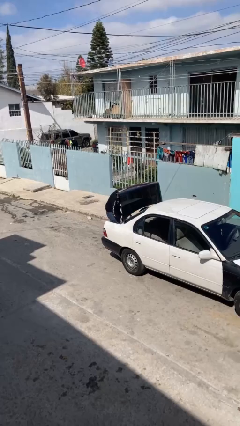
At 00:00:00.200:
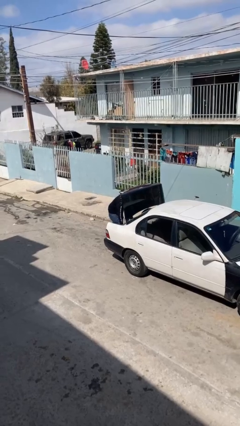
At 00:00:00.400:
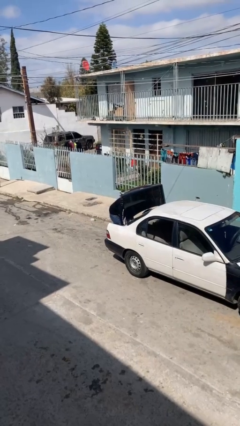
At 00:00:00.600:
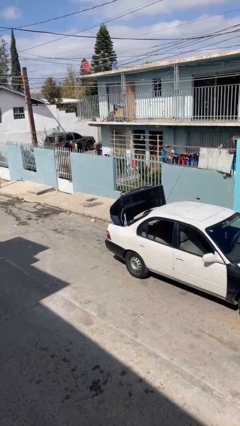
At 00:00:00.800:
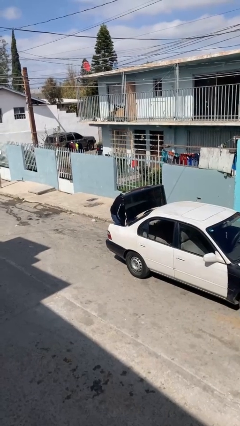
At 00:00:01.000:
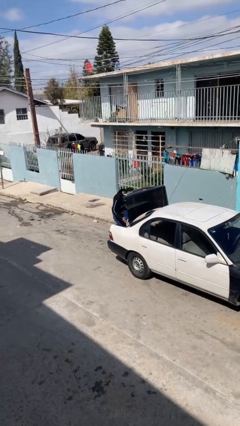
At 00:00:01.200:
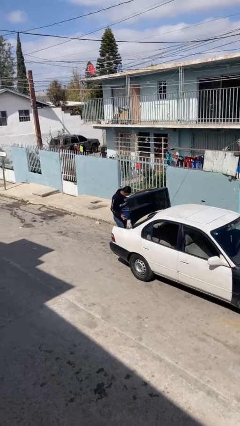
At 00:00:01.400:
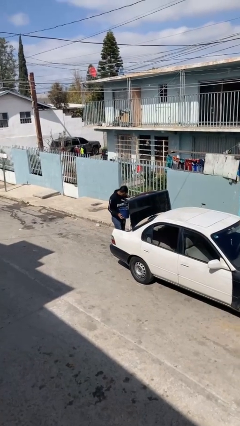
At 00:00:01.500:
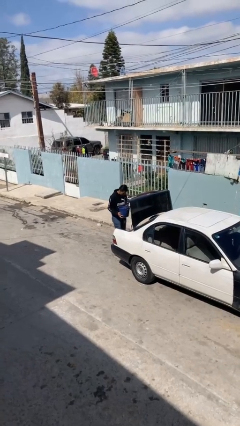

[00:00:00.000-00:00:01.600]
person unloads car

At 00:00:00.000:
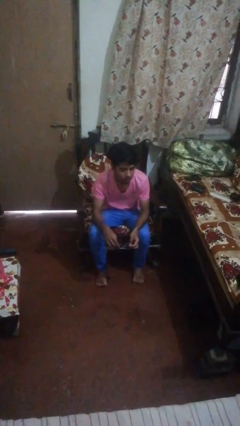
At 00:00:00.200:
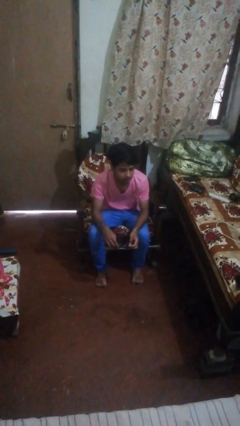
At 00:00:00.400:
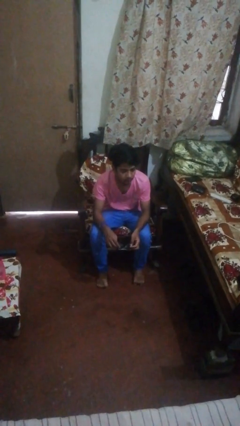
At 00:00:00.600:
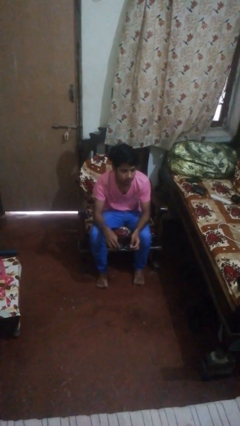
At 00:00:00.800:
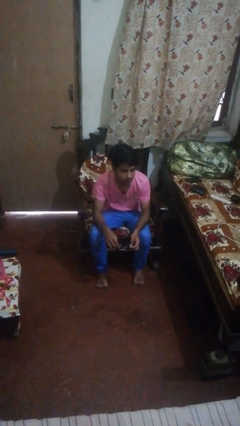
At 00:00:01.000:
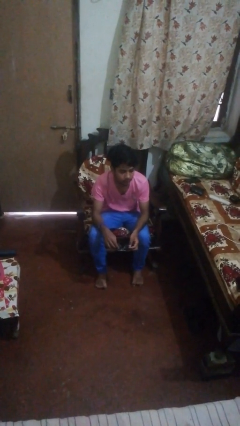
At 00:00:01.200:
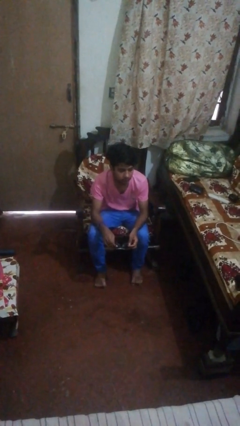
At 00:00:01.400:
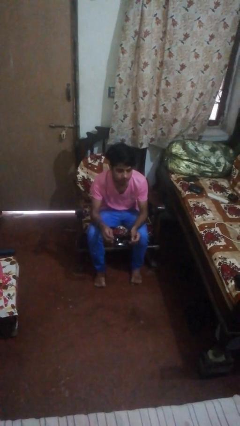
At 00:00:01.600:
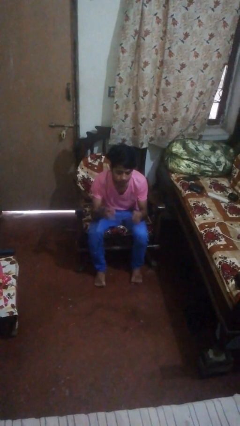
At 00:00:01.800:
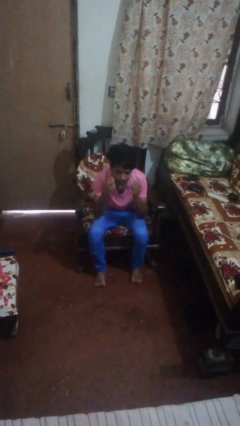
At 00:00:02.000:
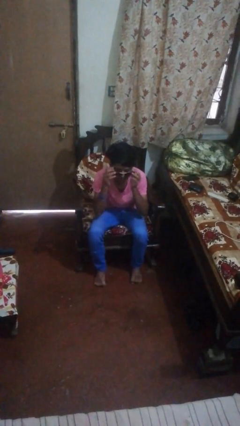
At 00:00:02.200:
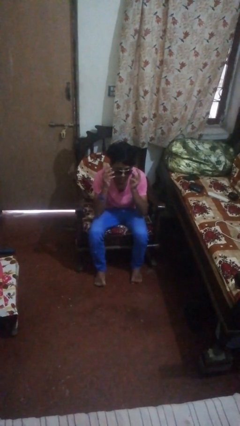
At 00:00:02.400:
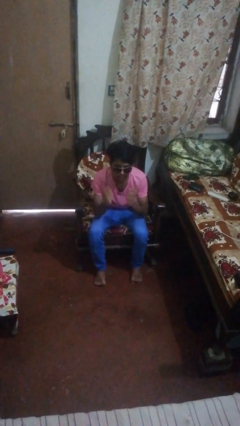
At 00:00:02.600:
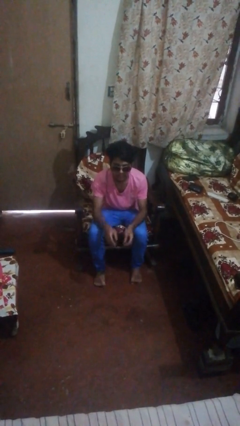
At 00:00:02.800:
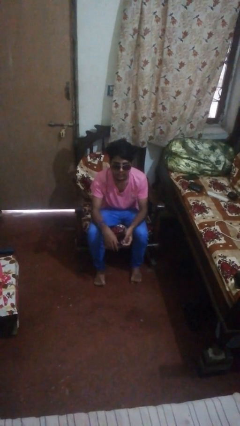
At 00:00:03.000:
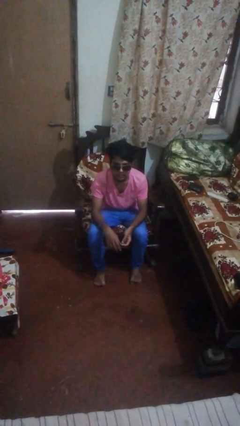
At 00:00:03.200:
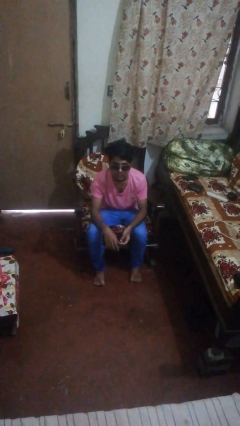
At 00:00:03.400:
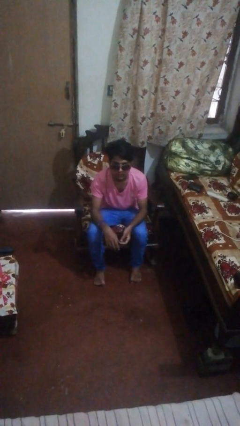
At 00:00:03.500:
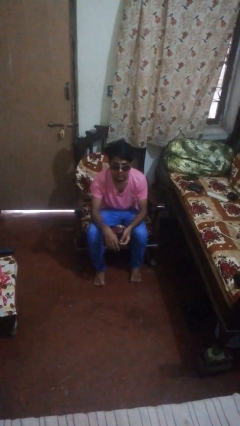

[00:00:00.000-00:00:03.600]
person puts on sunglasses

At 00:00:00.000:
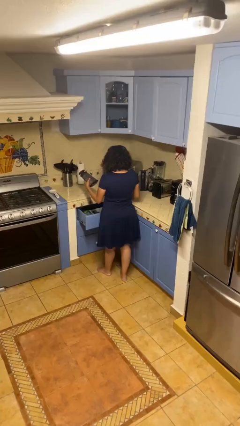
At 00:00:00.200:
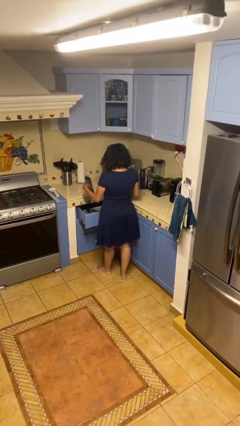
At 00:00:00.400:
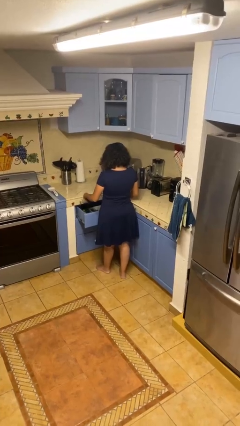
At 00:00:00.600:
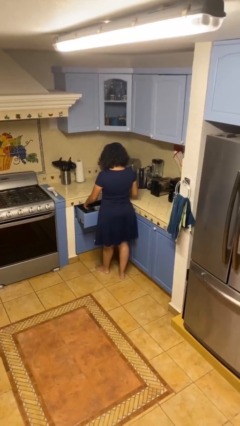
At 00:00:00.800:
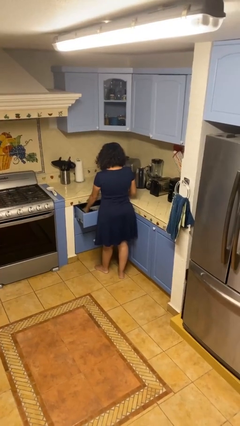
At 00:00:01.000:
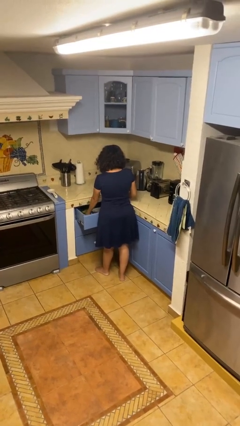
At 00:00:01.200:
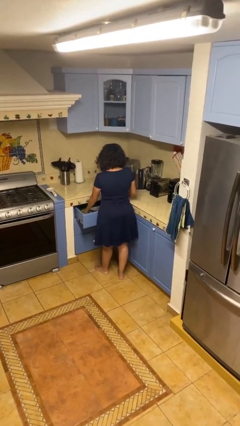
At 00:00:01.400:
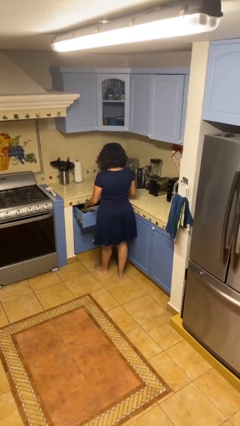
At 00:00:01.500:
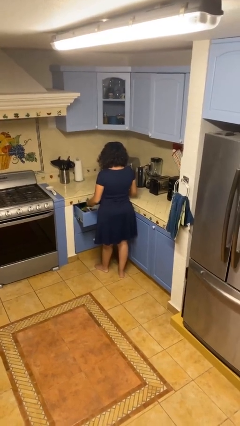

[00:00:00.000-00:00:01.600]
person puts object into kitchen drawer

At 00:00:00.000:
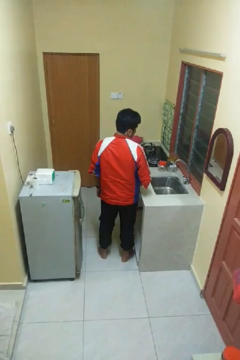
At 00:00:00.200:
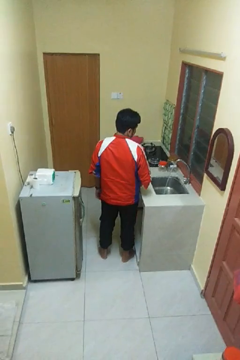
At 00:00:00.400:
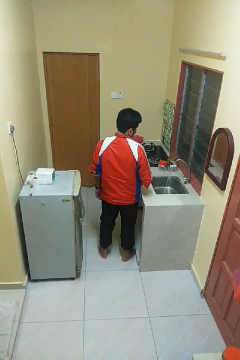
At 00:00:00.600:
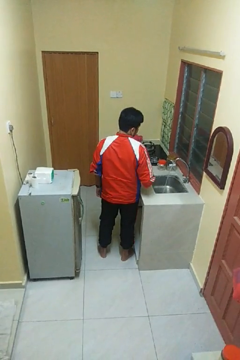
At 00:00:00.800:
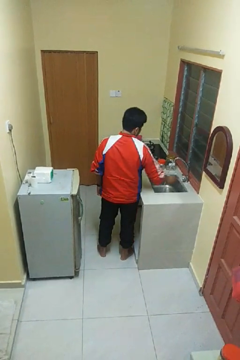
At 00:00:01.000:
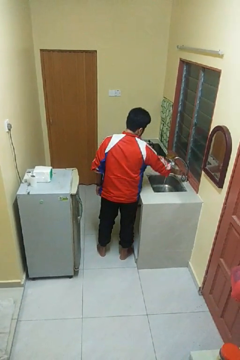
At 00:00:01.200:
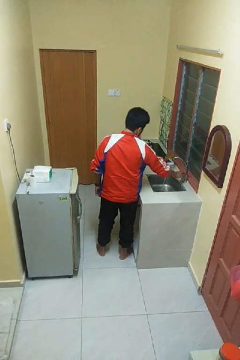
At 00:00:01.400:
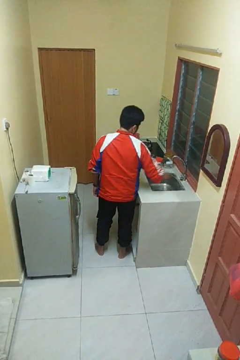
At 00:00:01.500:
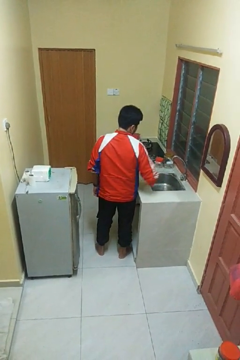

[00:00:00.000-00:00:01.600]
person turns off faucet

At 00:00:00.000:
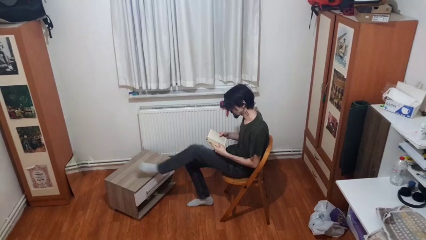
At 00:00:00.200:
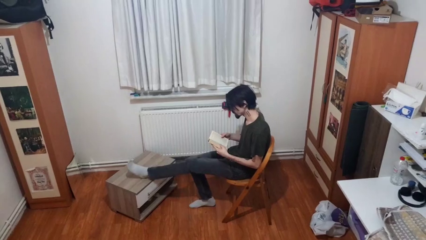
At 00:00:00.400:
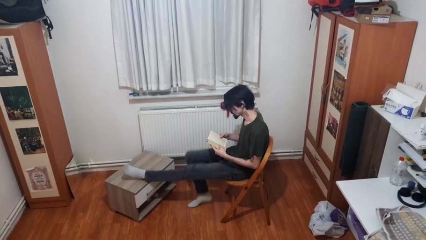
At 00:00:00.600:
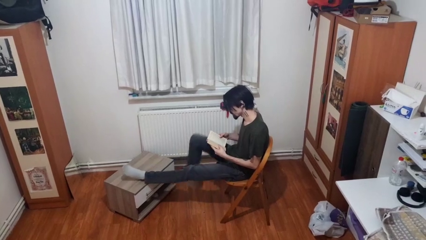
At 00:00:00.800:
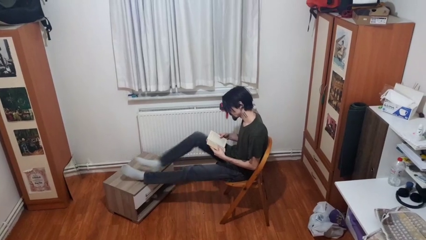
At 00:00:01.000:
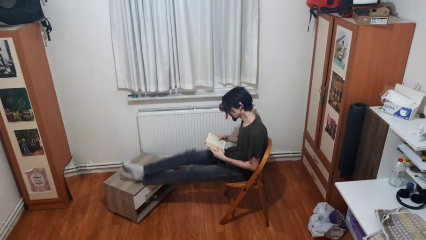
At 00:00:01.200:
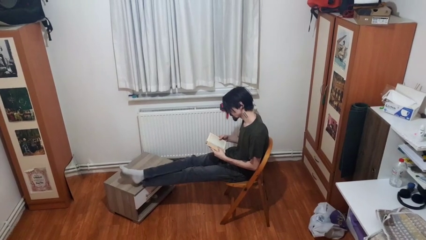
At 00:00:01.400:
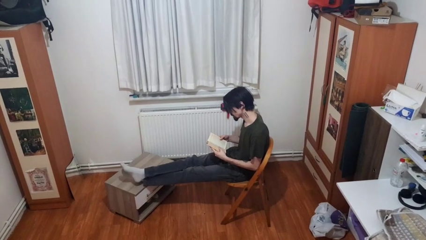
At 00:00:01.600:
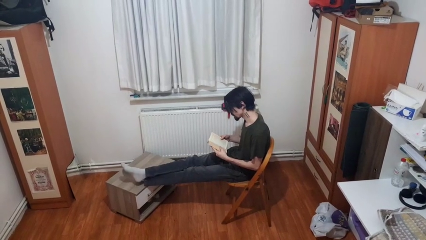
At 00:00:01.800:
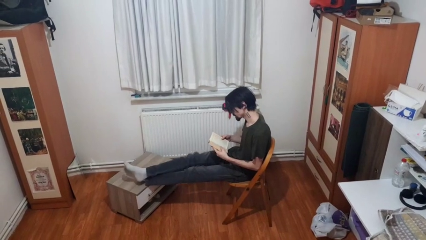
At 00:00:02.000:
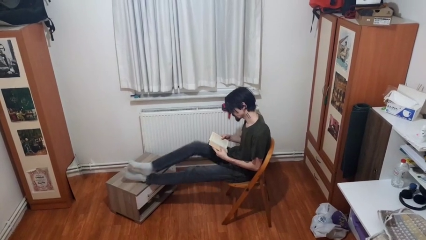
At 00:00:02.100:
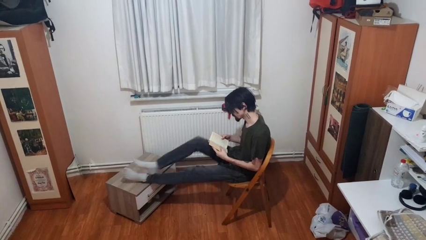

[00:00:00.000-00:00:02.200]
person puts feet up

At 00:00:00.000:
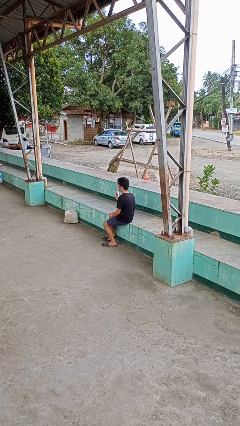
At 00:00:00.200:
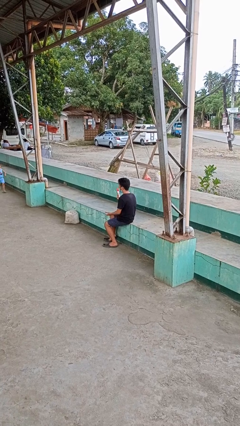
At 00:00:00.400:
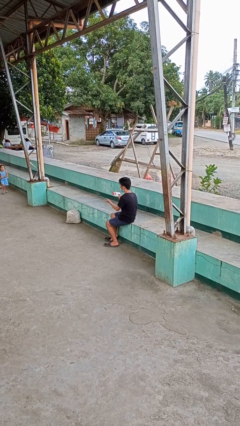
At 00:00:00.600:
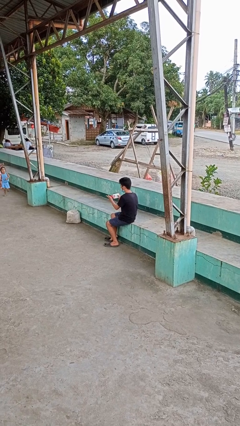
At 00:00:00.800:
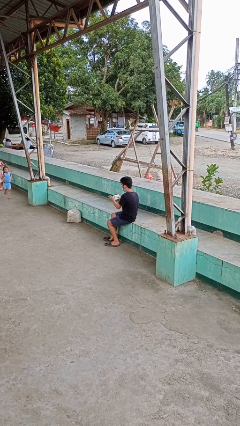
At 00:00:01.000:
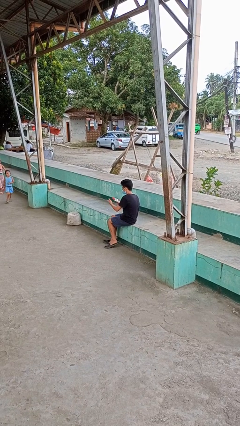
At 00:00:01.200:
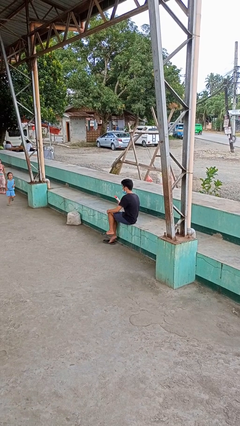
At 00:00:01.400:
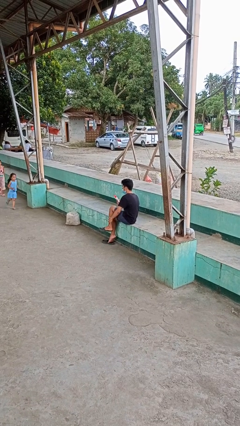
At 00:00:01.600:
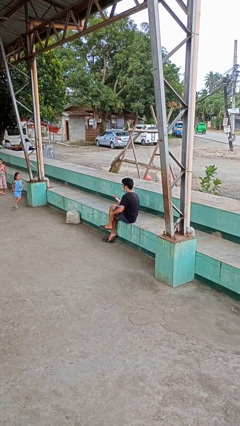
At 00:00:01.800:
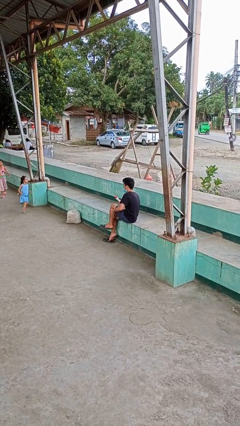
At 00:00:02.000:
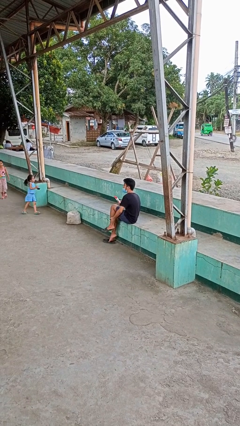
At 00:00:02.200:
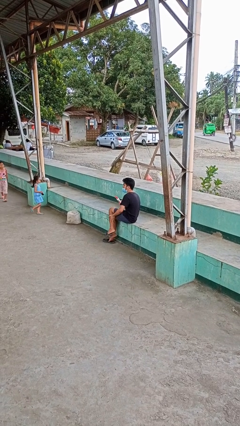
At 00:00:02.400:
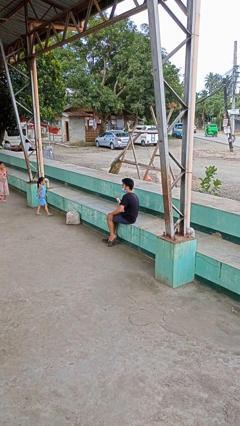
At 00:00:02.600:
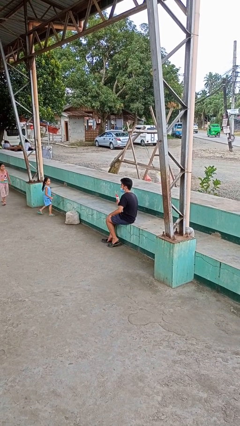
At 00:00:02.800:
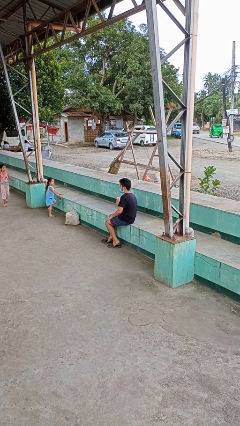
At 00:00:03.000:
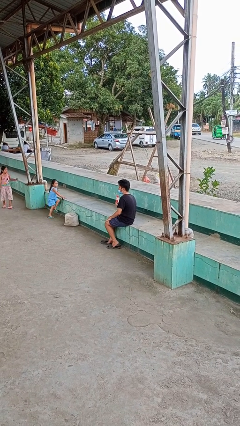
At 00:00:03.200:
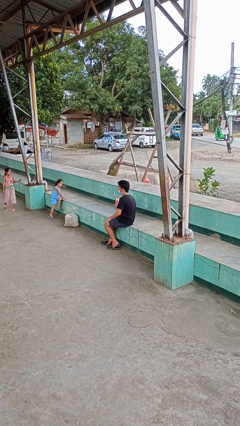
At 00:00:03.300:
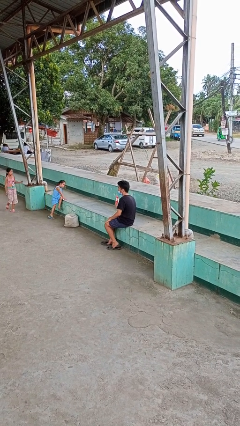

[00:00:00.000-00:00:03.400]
person applies sunscreen

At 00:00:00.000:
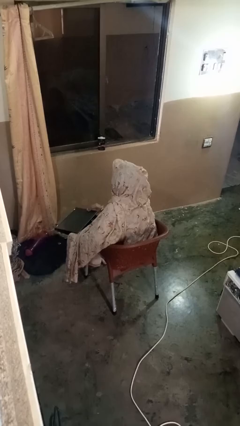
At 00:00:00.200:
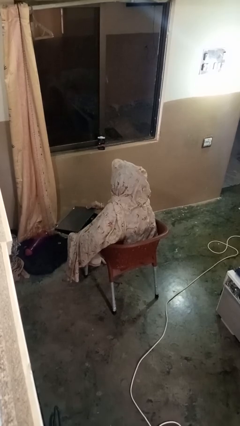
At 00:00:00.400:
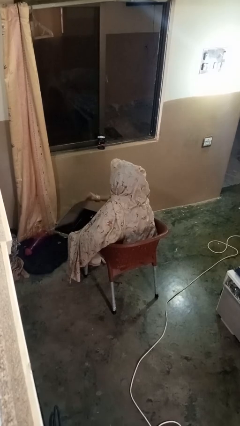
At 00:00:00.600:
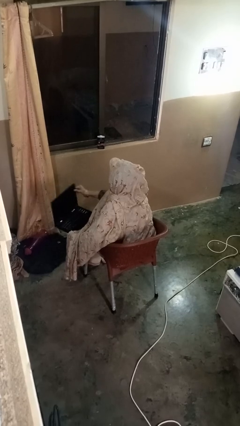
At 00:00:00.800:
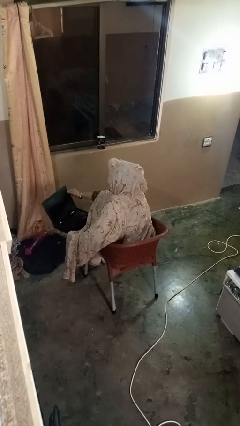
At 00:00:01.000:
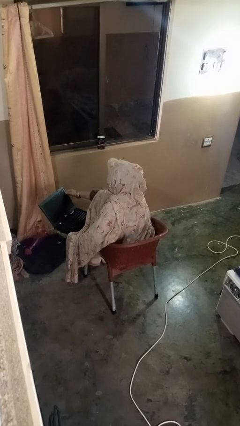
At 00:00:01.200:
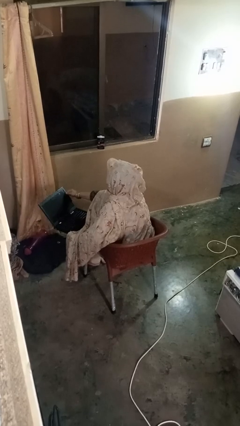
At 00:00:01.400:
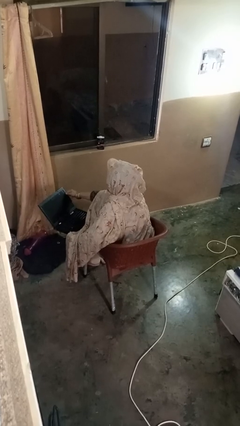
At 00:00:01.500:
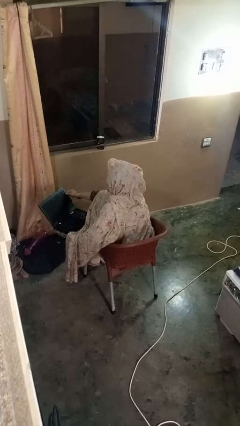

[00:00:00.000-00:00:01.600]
person opens laptop

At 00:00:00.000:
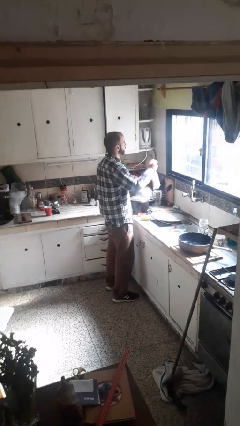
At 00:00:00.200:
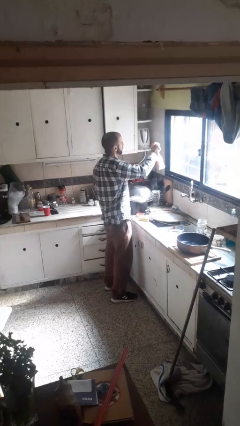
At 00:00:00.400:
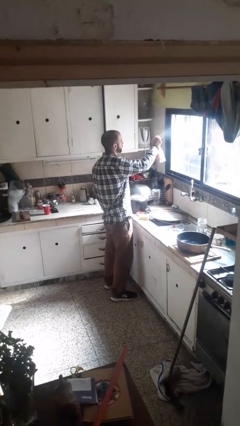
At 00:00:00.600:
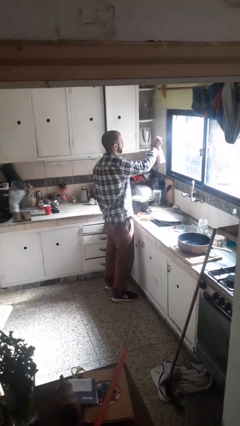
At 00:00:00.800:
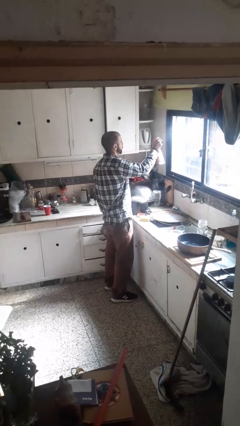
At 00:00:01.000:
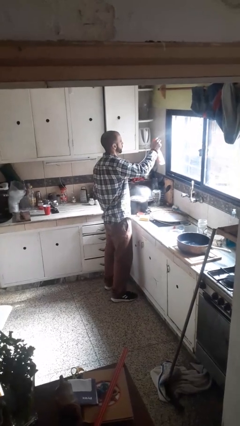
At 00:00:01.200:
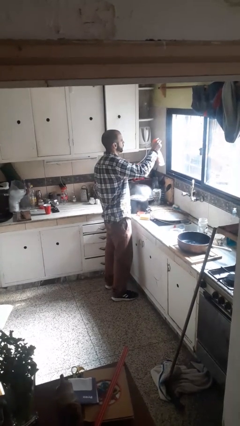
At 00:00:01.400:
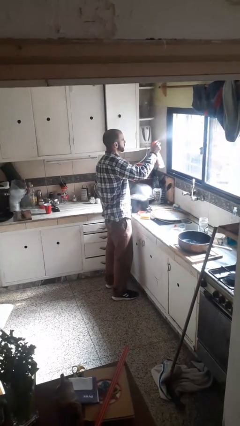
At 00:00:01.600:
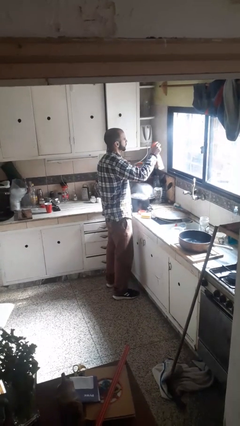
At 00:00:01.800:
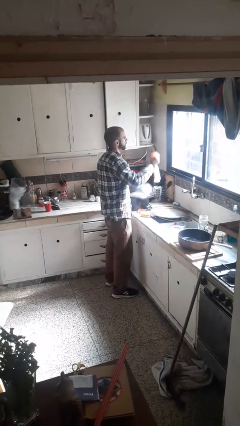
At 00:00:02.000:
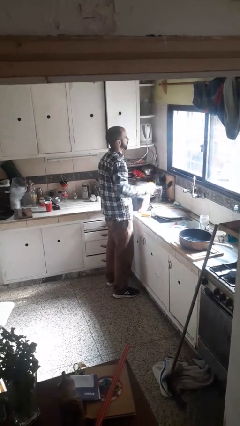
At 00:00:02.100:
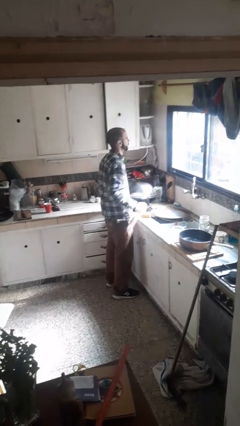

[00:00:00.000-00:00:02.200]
person sprays from bottle
